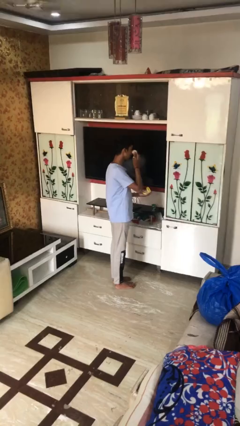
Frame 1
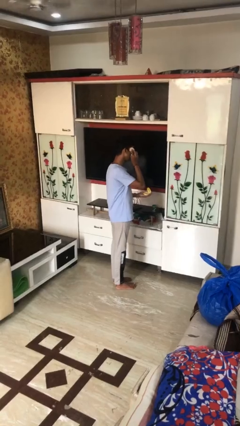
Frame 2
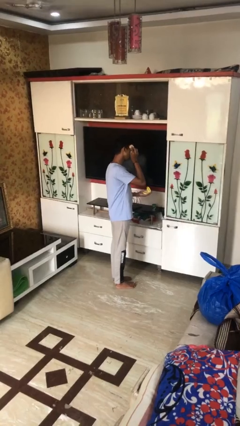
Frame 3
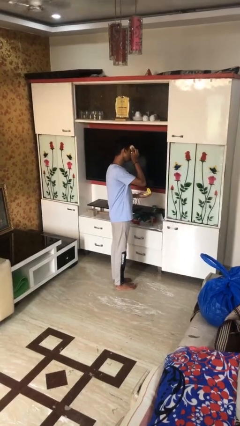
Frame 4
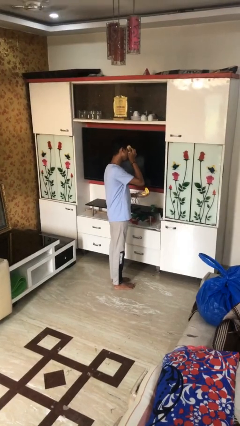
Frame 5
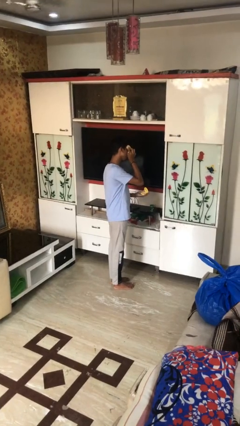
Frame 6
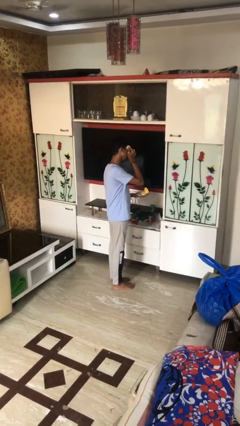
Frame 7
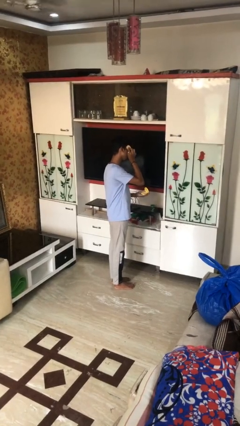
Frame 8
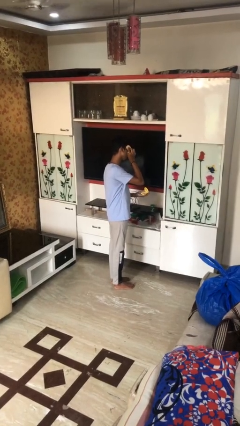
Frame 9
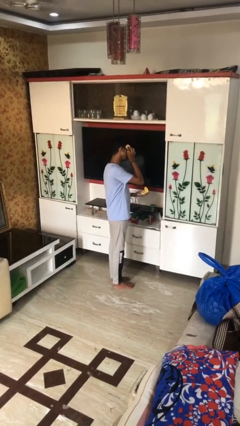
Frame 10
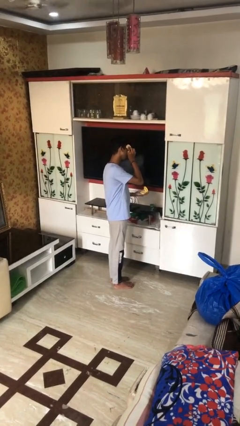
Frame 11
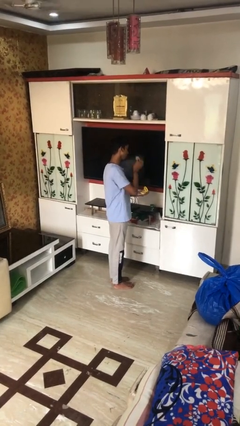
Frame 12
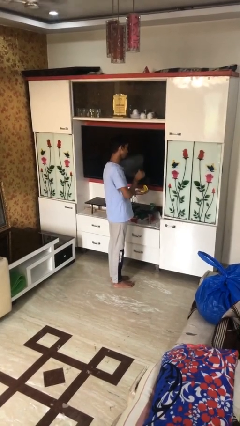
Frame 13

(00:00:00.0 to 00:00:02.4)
person applies foundation makeup

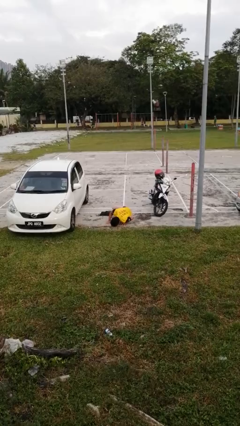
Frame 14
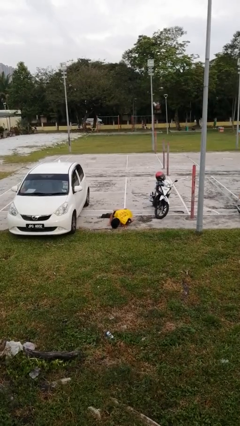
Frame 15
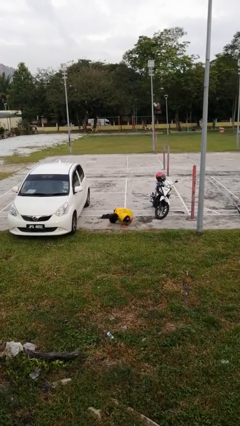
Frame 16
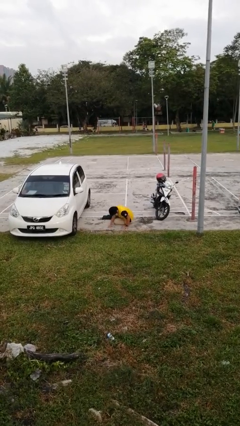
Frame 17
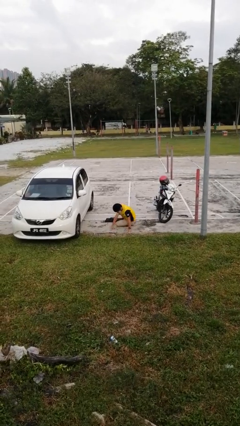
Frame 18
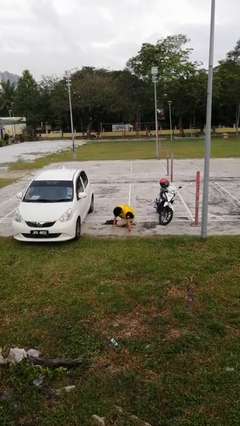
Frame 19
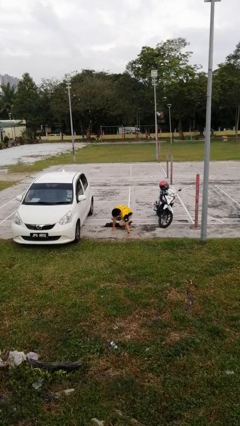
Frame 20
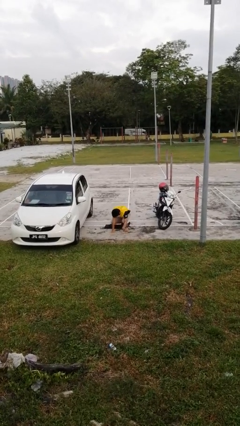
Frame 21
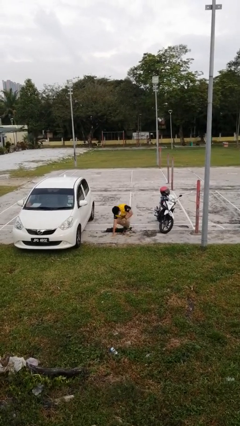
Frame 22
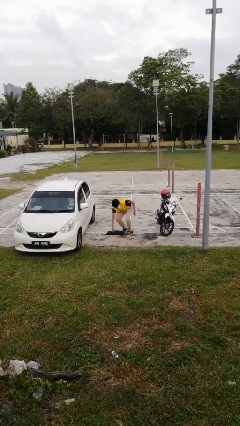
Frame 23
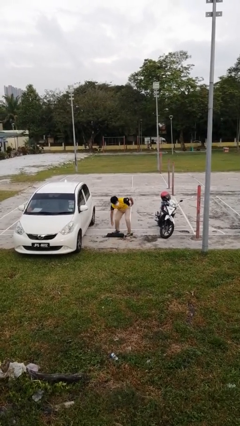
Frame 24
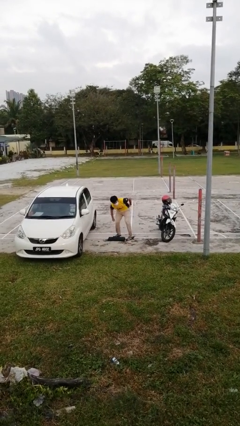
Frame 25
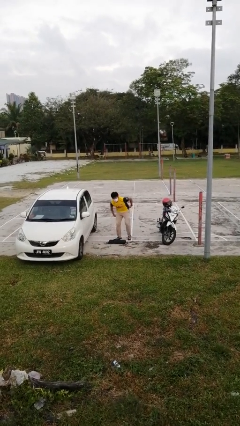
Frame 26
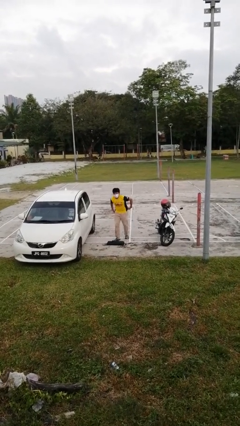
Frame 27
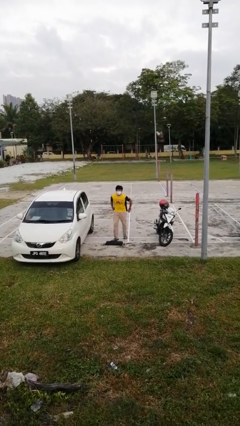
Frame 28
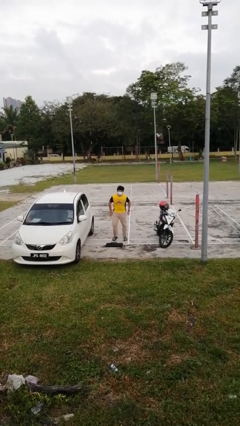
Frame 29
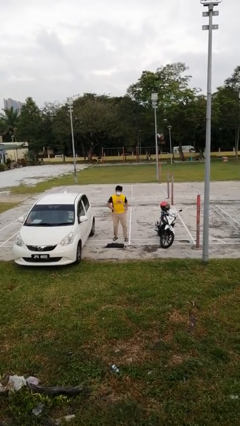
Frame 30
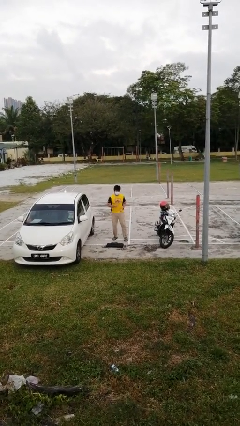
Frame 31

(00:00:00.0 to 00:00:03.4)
person stands up from floor

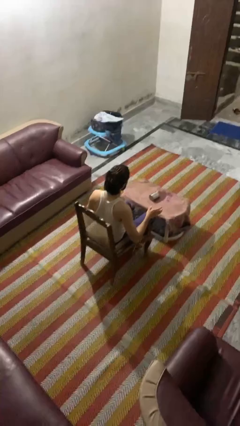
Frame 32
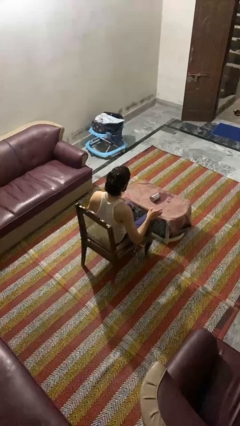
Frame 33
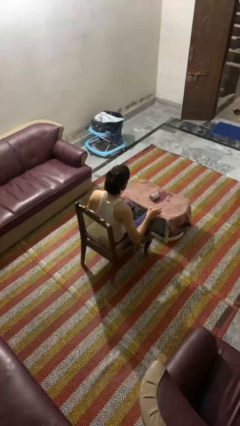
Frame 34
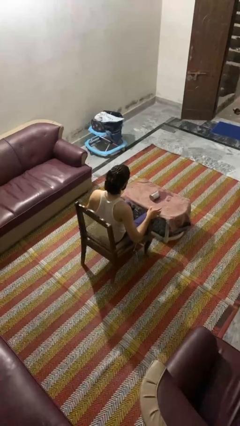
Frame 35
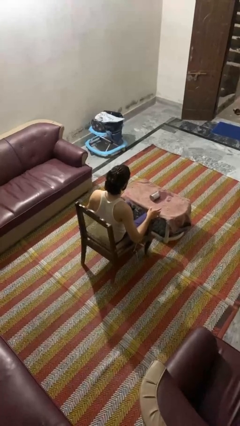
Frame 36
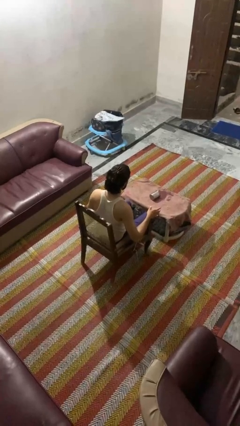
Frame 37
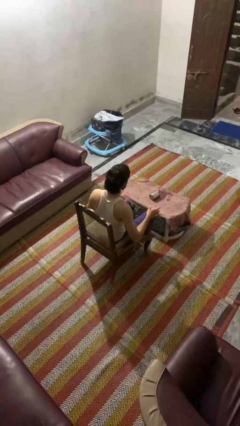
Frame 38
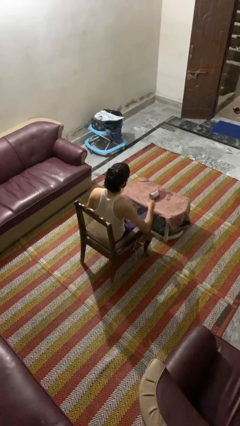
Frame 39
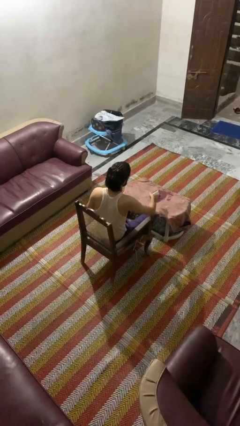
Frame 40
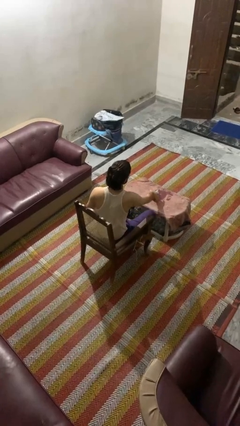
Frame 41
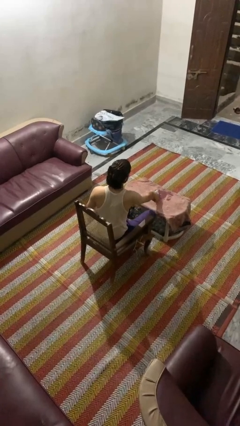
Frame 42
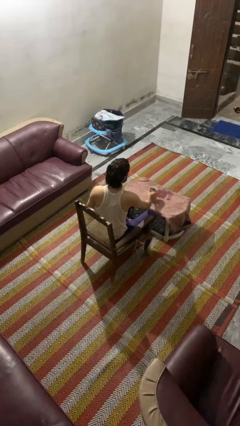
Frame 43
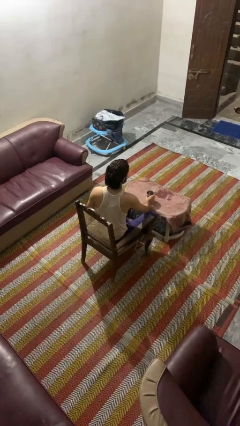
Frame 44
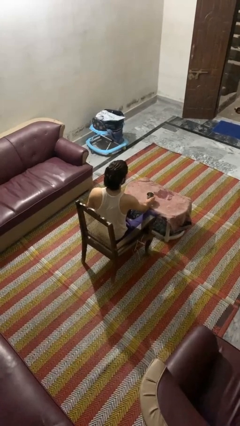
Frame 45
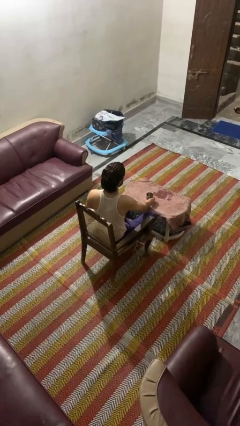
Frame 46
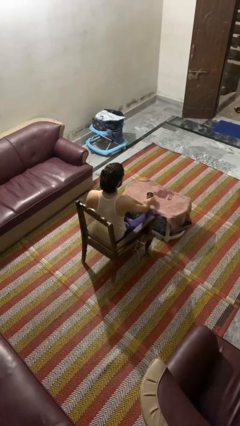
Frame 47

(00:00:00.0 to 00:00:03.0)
person sets upright glass

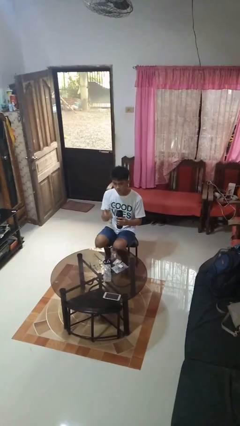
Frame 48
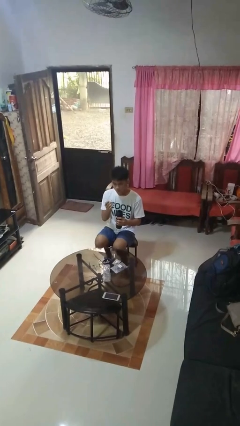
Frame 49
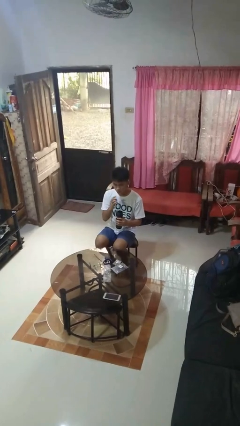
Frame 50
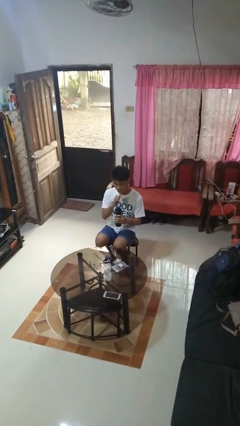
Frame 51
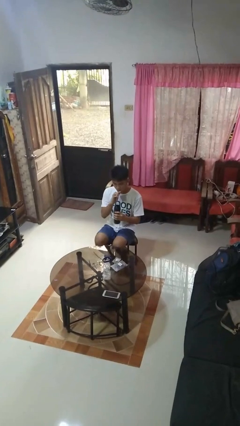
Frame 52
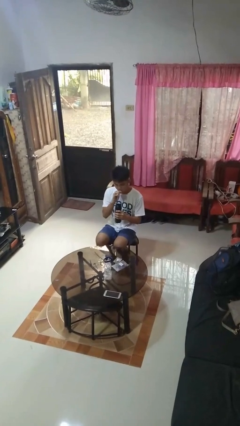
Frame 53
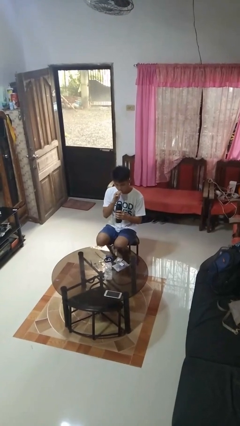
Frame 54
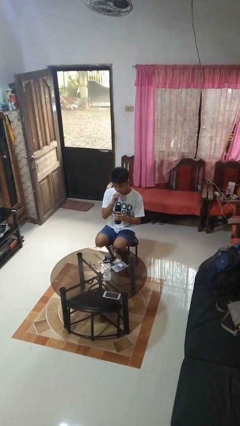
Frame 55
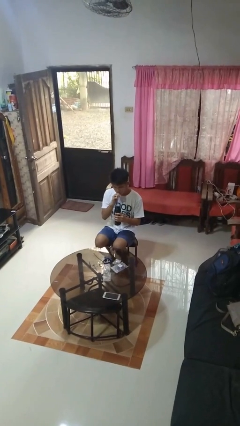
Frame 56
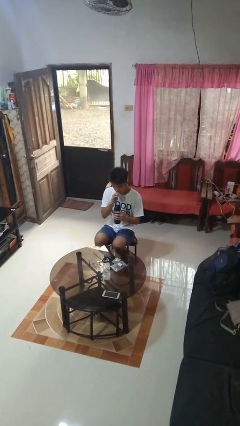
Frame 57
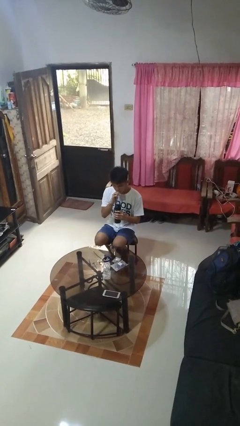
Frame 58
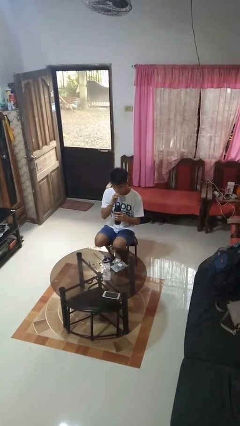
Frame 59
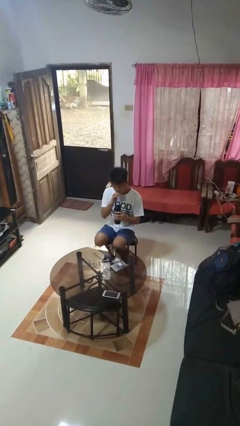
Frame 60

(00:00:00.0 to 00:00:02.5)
person drinks from straw

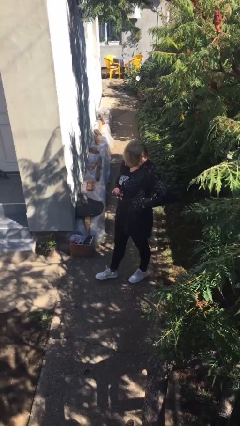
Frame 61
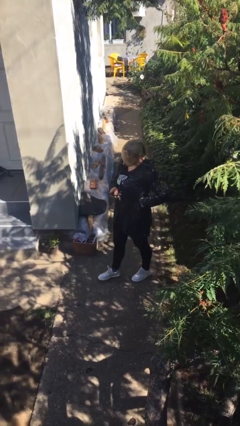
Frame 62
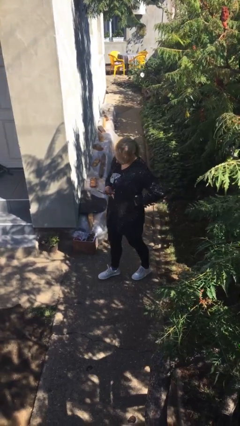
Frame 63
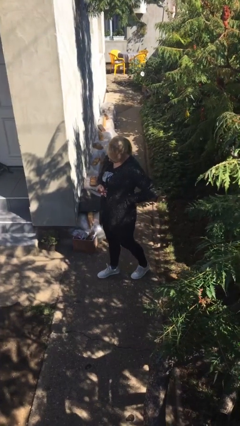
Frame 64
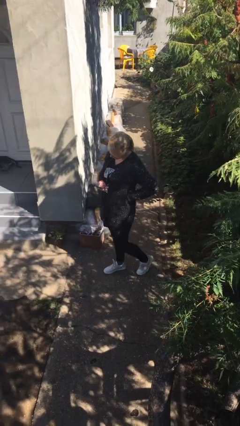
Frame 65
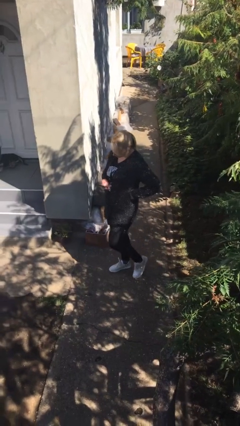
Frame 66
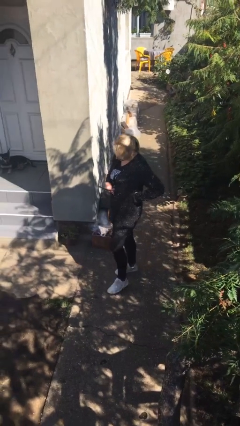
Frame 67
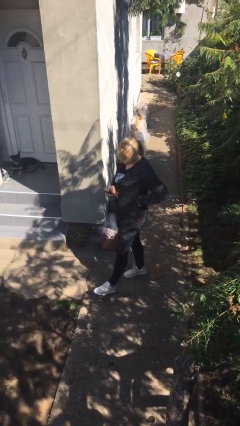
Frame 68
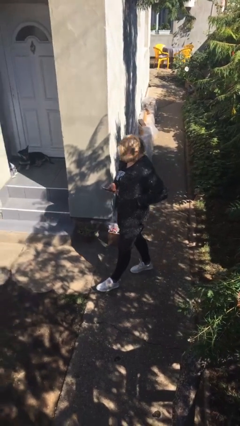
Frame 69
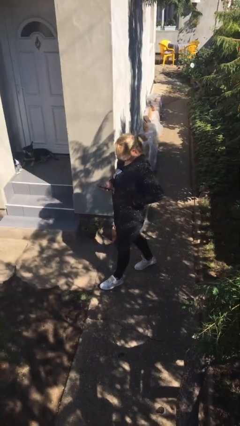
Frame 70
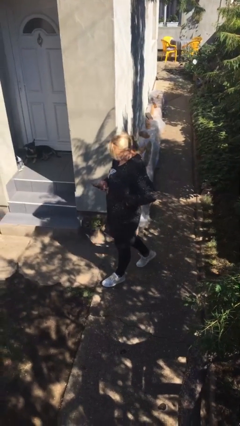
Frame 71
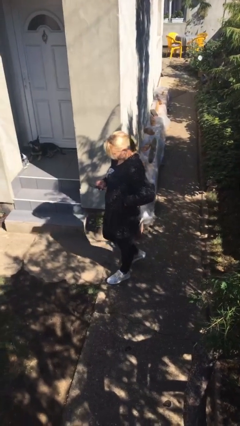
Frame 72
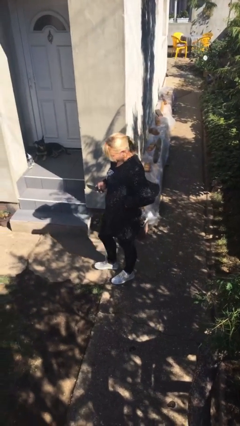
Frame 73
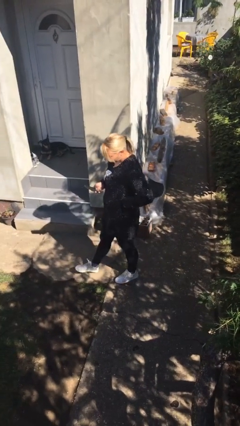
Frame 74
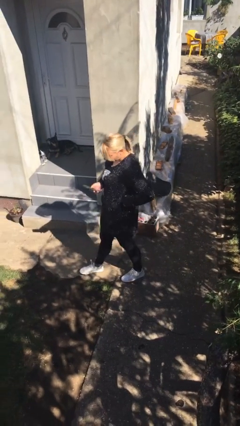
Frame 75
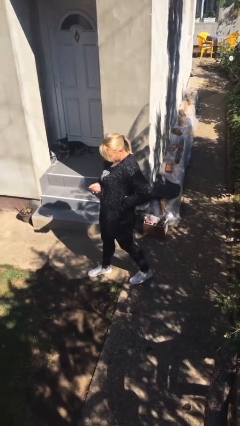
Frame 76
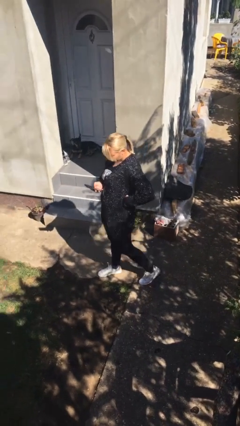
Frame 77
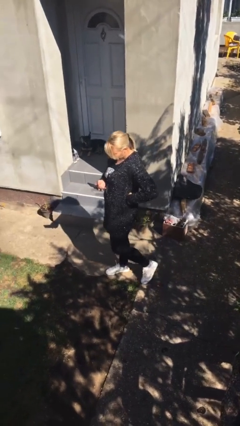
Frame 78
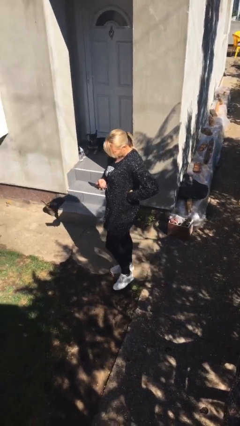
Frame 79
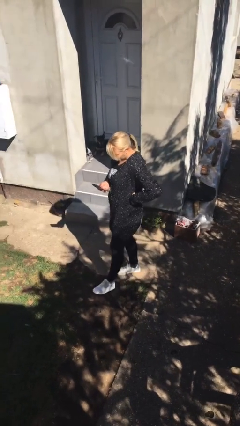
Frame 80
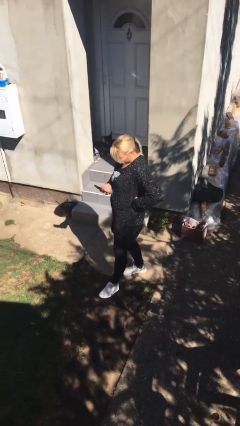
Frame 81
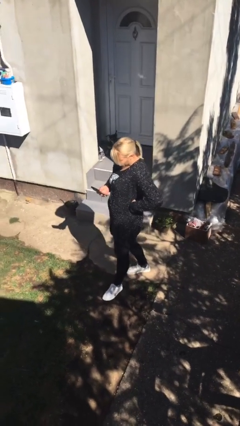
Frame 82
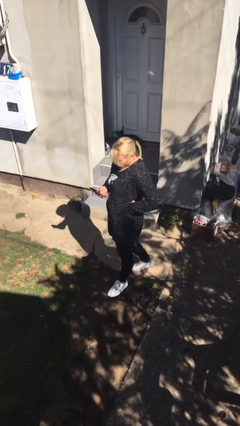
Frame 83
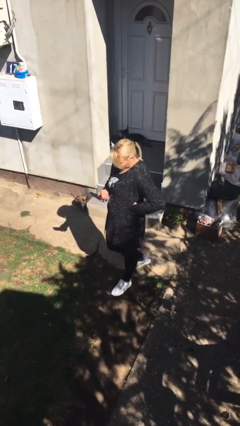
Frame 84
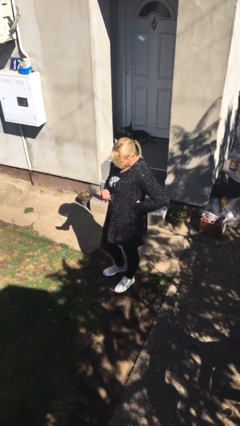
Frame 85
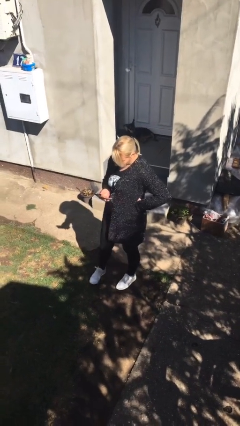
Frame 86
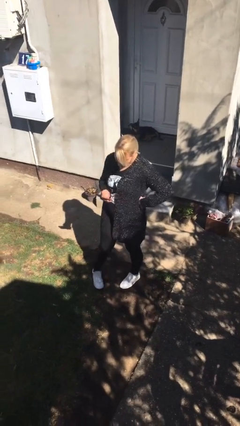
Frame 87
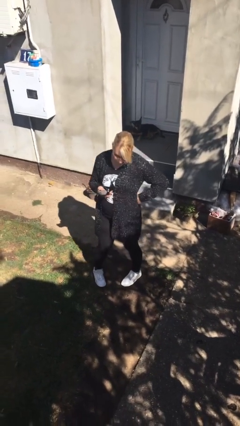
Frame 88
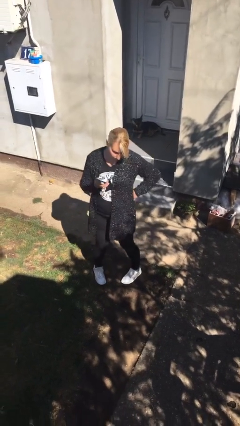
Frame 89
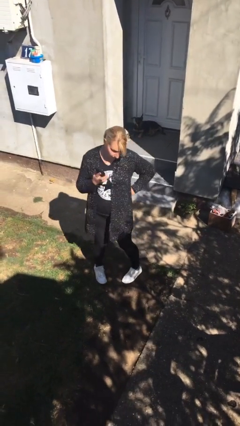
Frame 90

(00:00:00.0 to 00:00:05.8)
person texts on phone

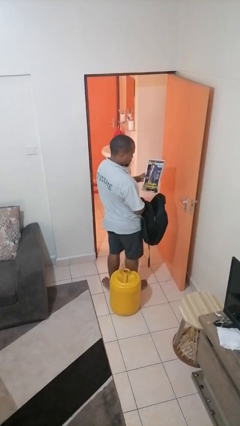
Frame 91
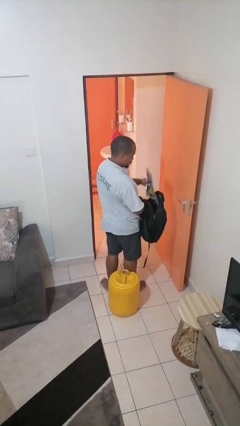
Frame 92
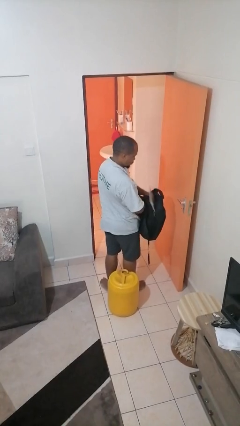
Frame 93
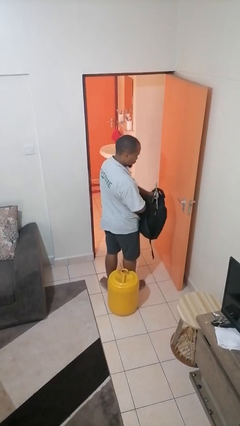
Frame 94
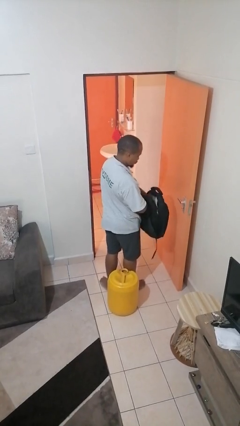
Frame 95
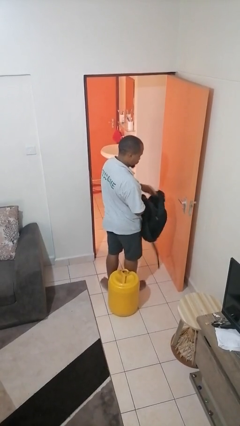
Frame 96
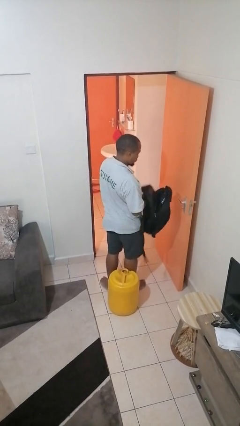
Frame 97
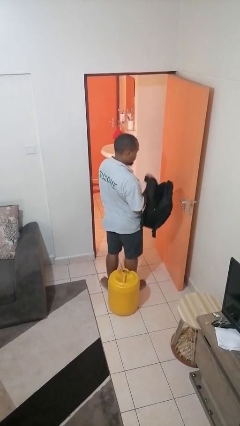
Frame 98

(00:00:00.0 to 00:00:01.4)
person puts object into backpack
